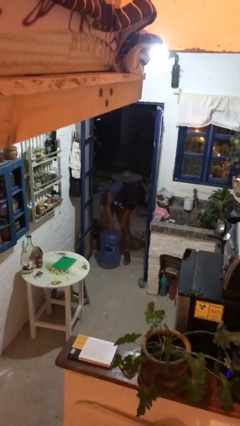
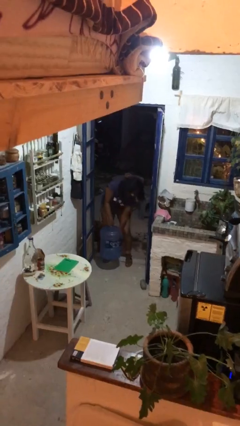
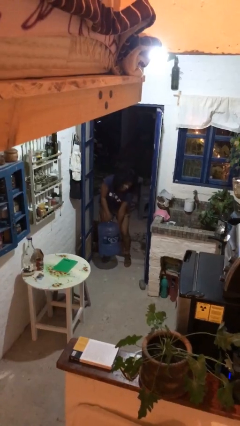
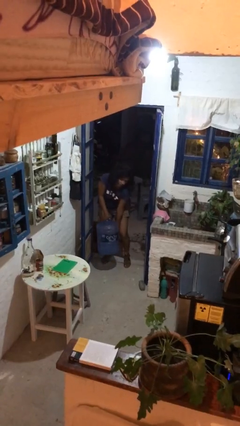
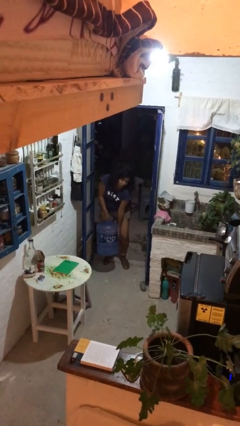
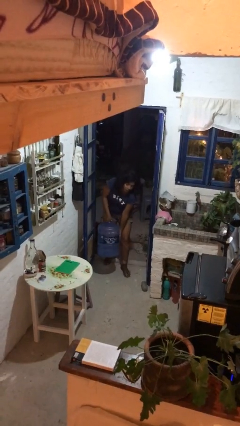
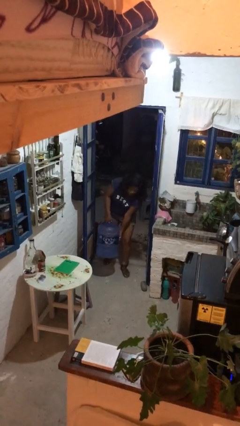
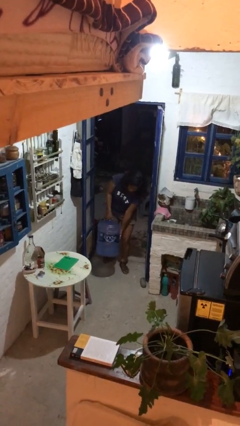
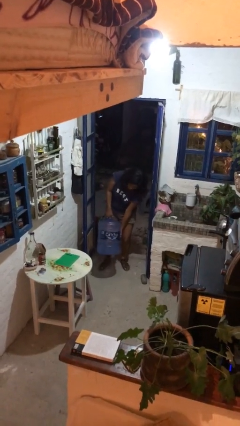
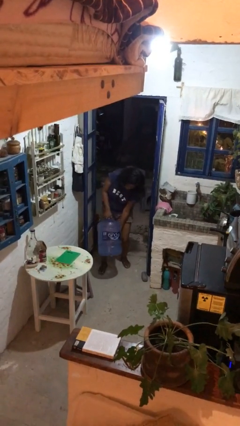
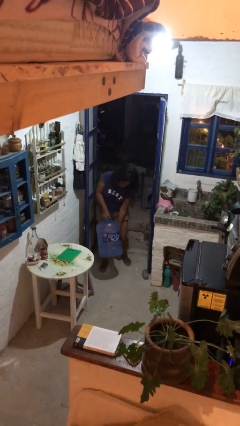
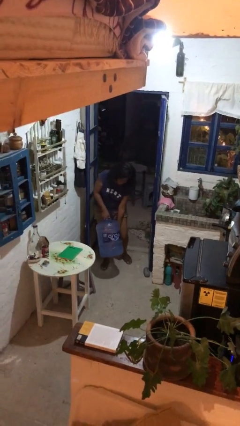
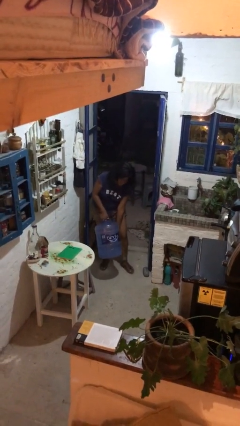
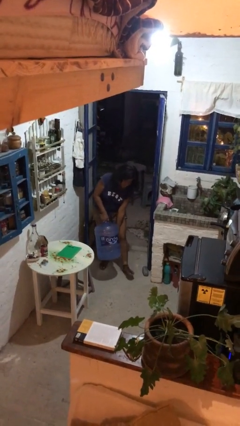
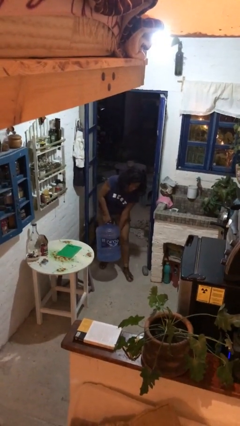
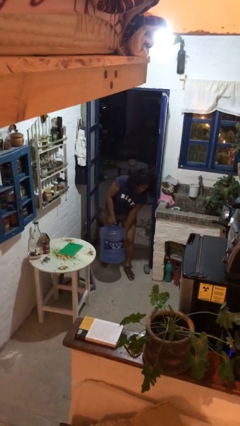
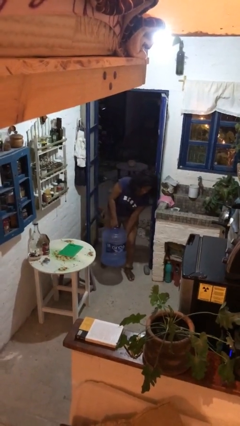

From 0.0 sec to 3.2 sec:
person carries heavy object

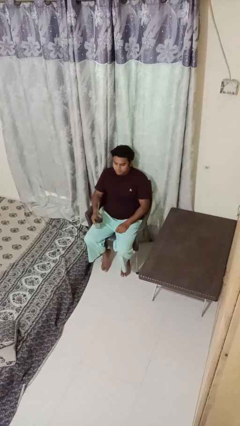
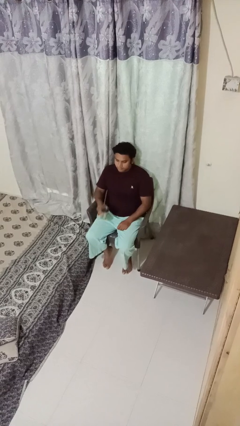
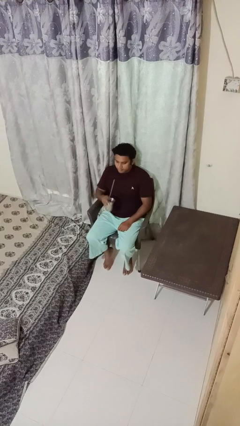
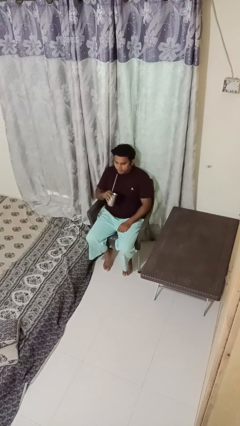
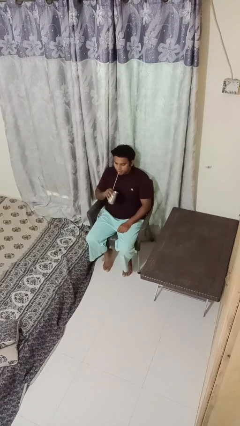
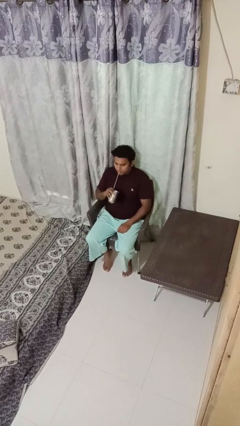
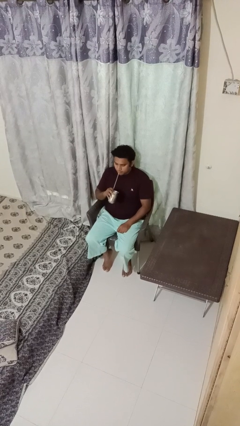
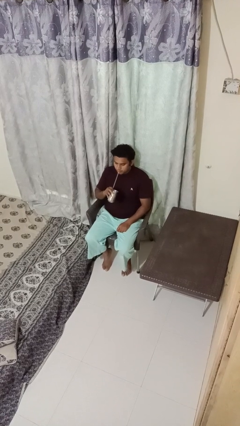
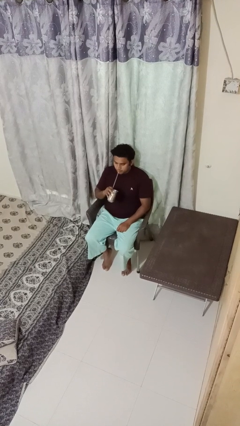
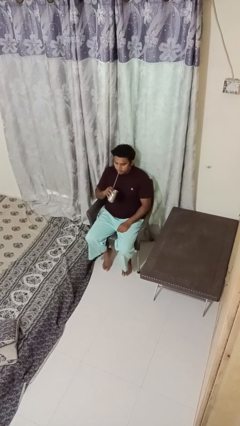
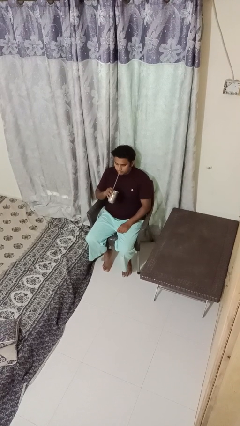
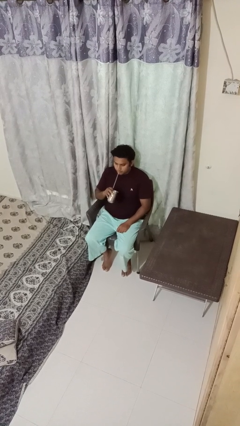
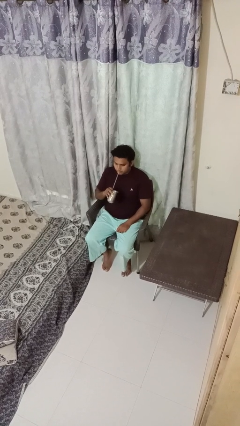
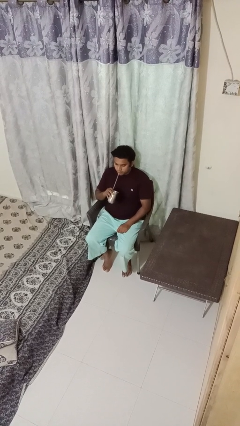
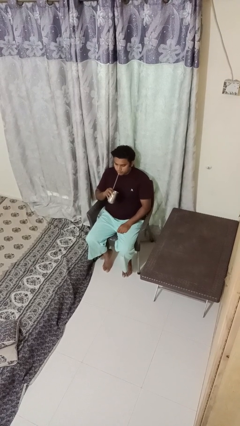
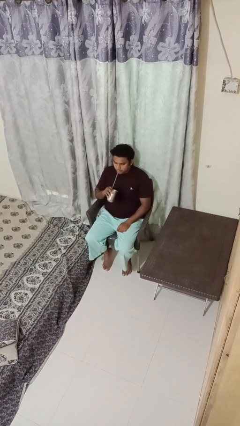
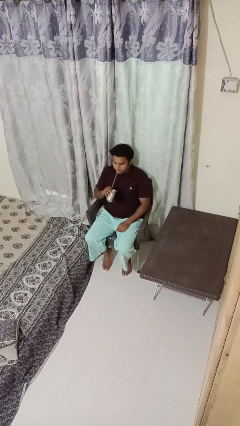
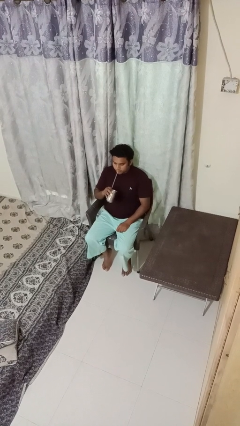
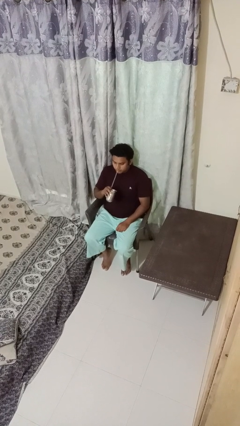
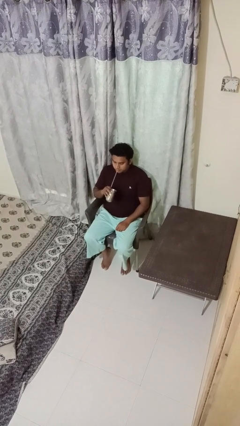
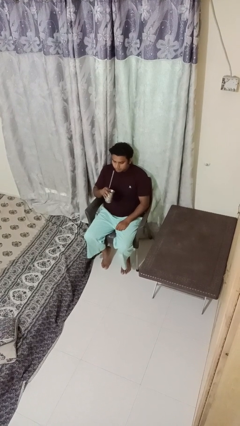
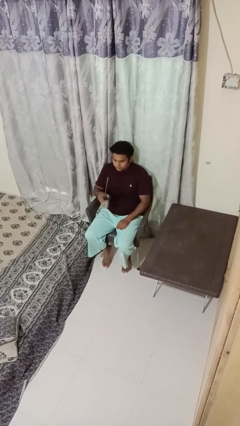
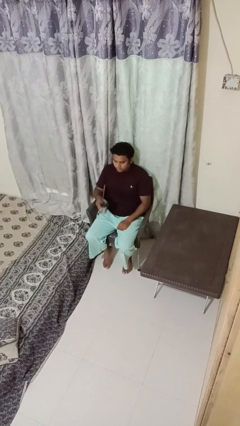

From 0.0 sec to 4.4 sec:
person drinks from straw

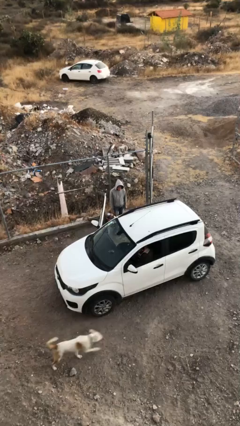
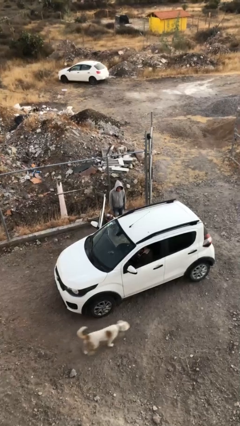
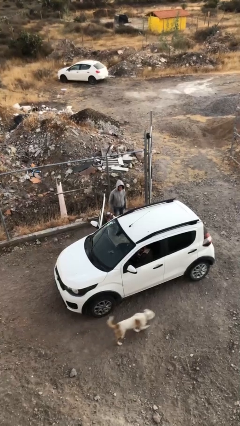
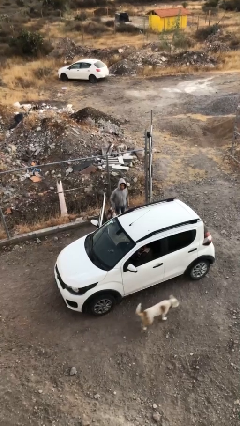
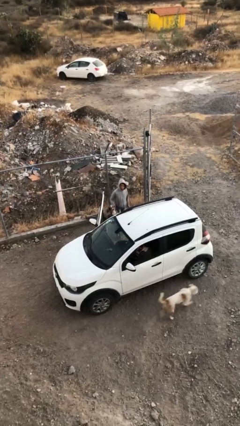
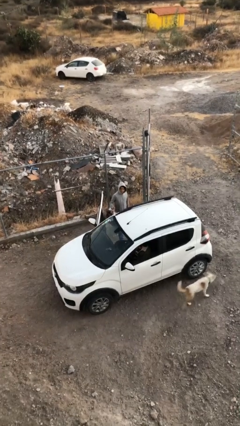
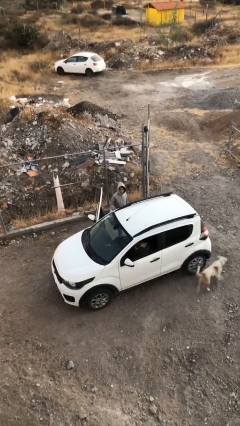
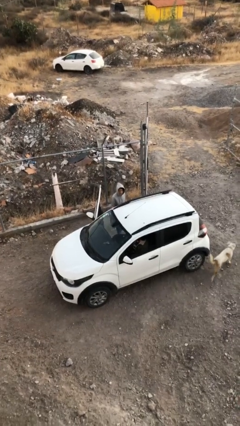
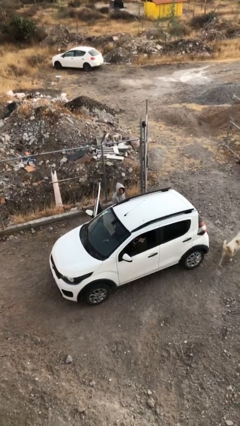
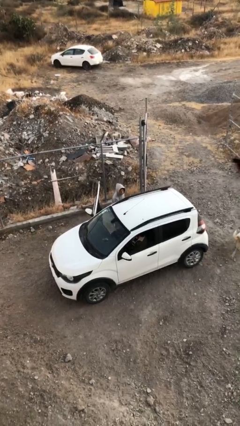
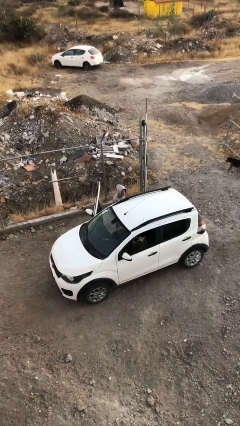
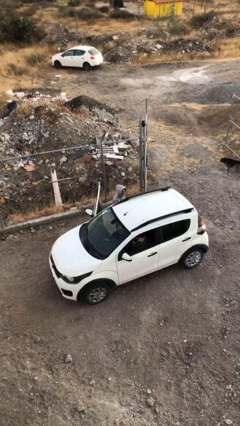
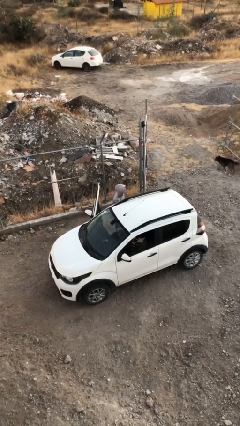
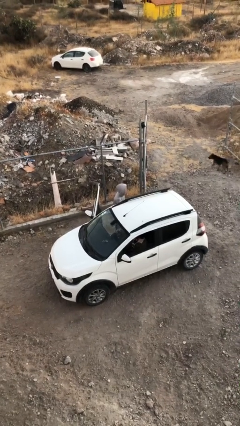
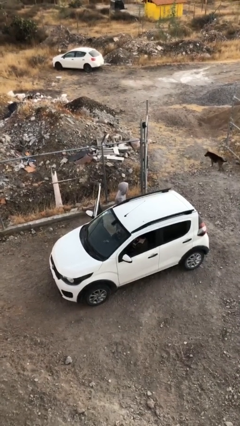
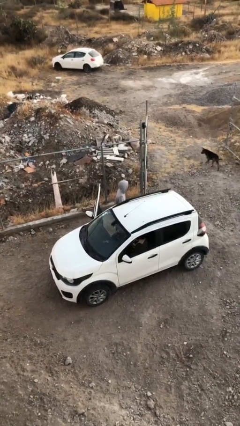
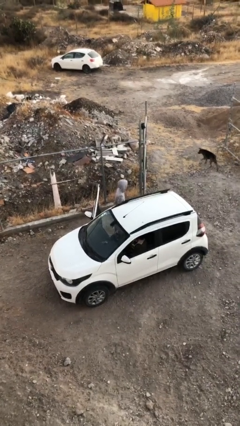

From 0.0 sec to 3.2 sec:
person loads car

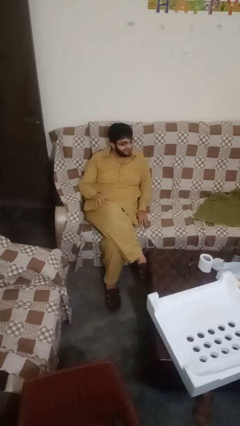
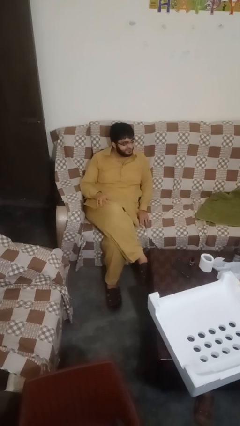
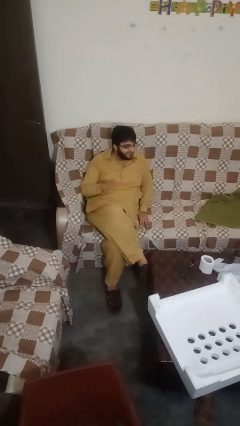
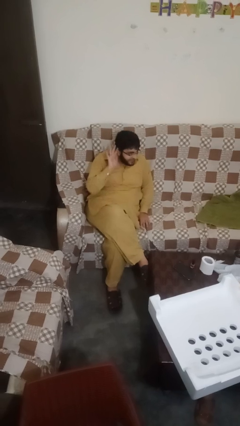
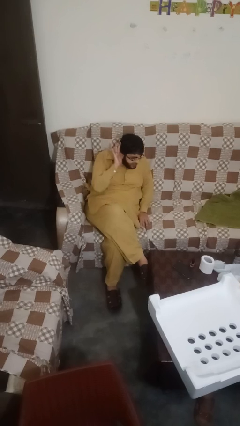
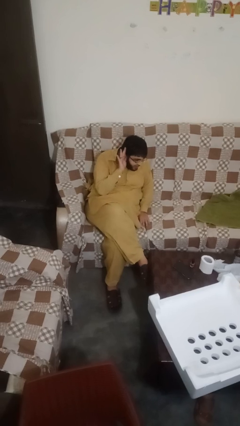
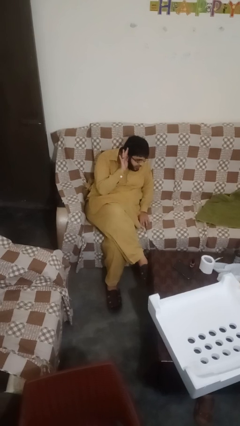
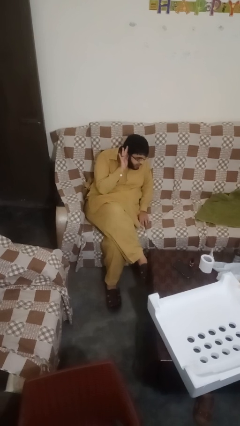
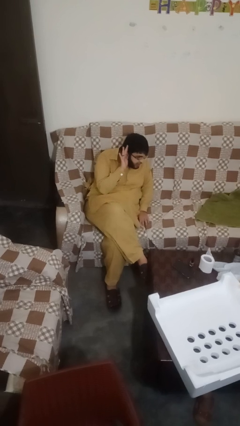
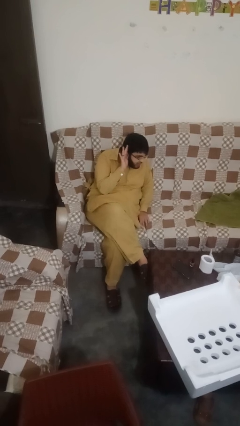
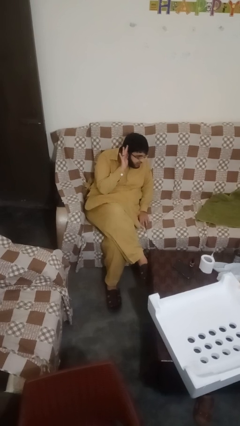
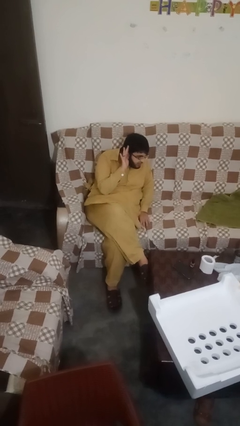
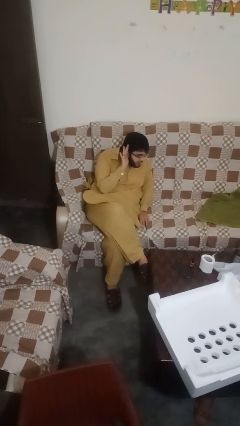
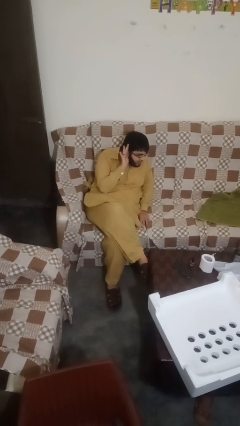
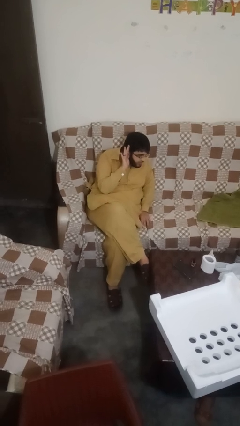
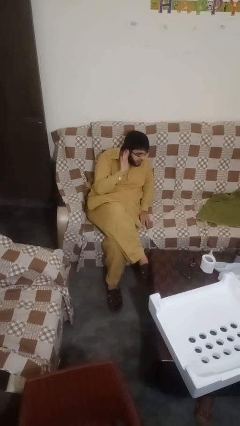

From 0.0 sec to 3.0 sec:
person gestures listen closely

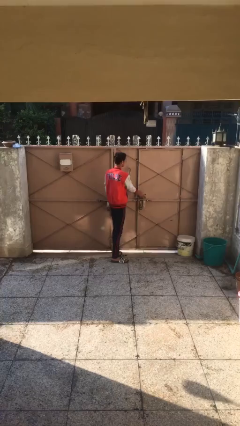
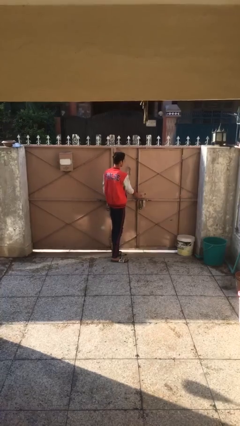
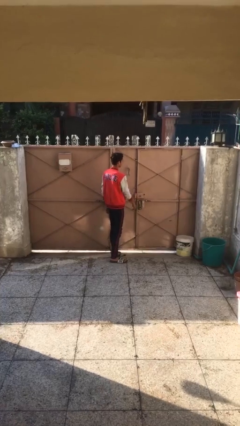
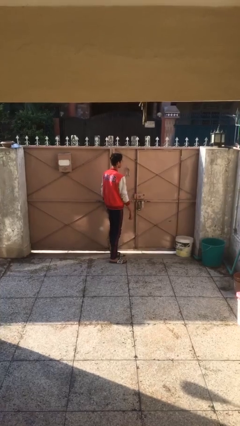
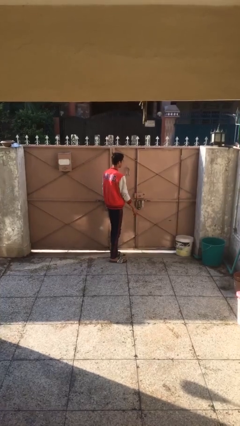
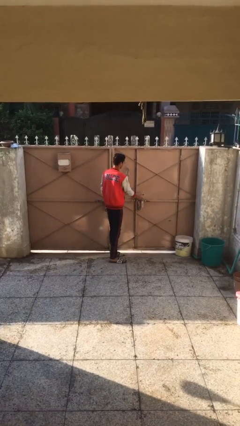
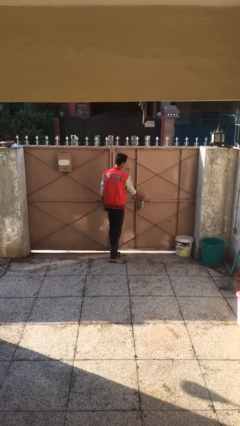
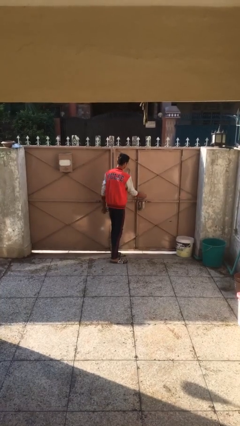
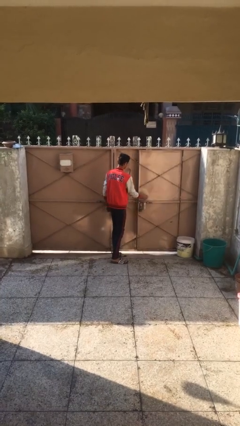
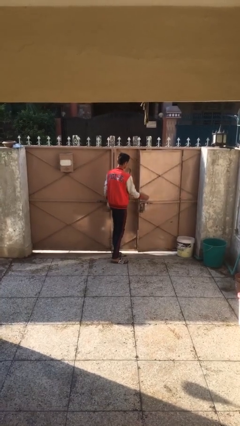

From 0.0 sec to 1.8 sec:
person opens facility door

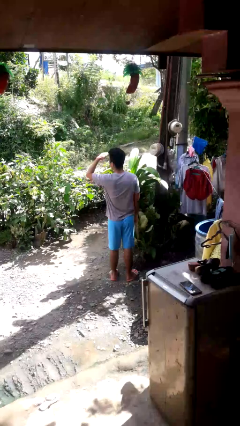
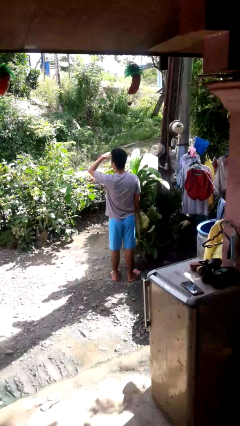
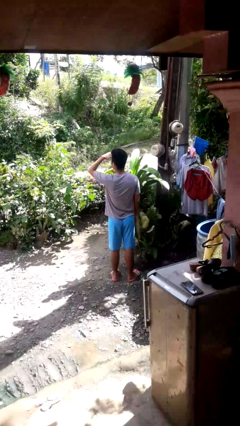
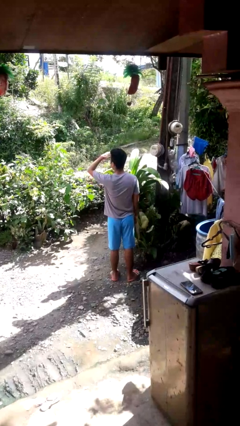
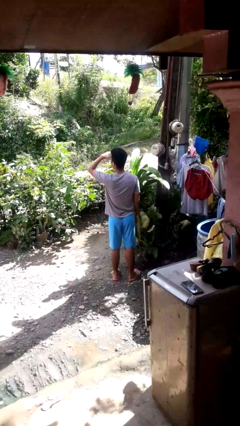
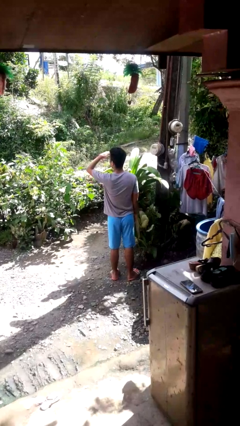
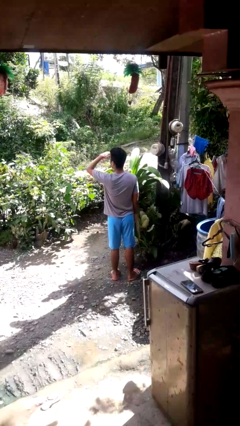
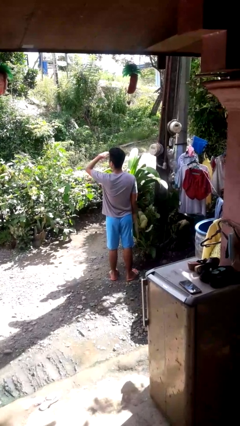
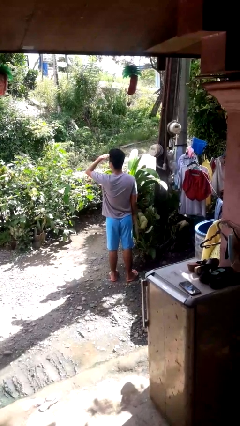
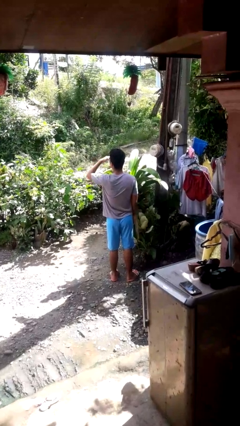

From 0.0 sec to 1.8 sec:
person shades eyes
